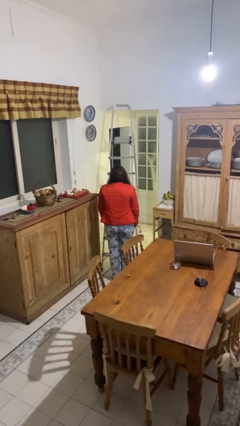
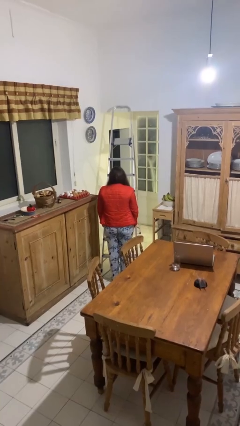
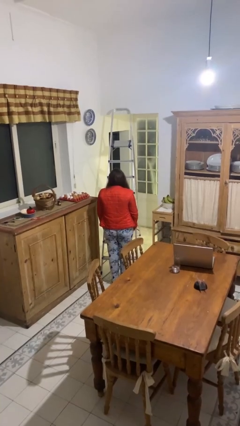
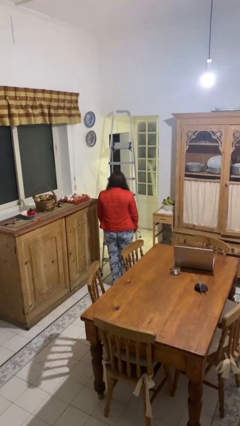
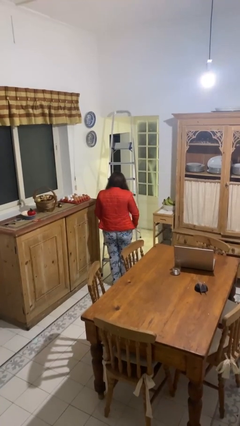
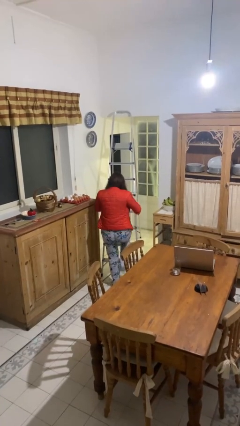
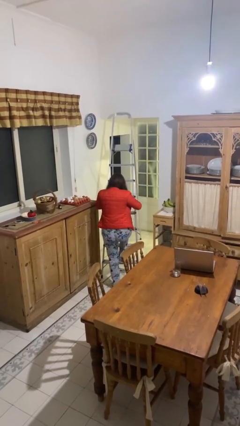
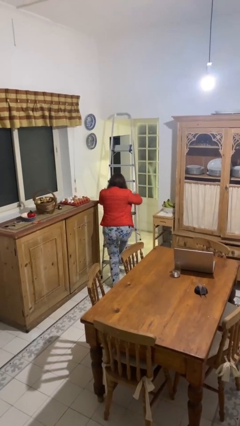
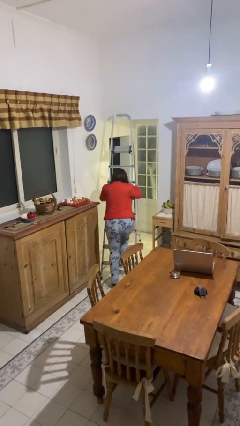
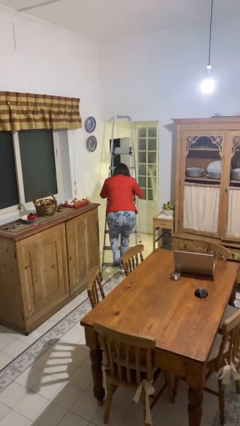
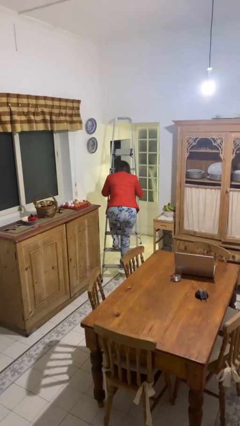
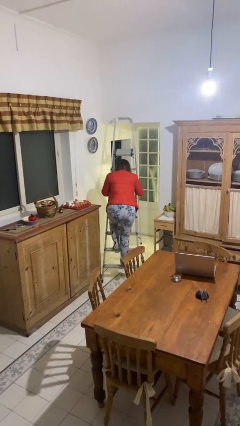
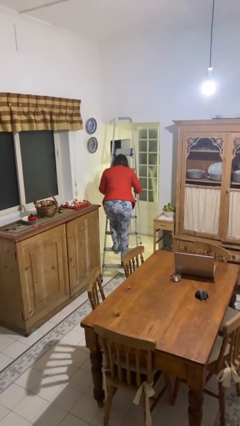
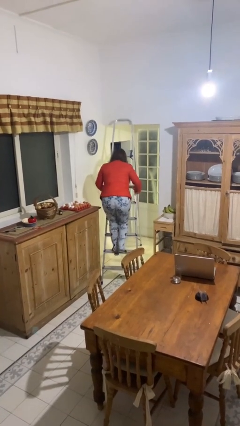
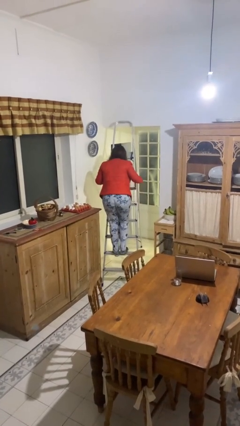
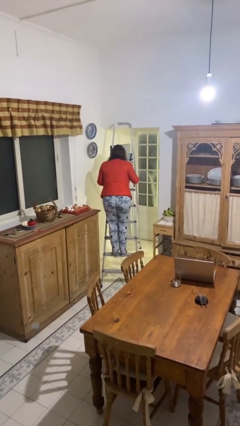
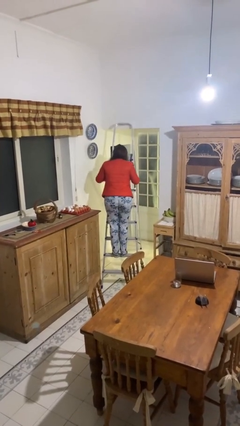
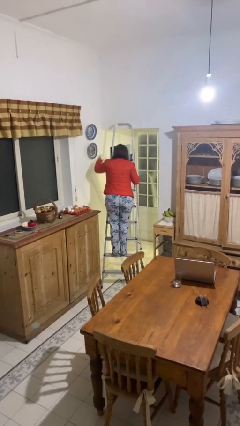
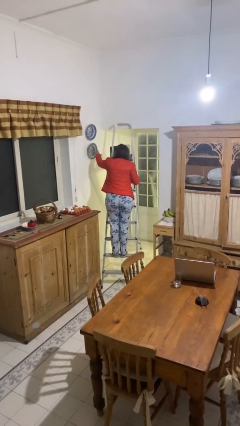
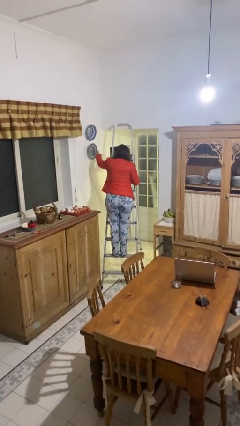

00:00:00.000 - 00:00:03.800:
person climbs up ladder

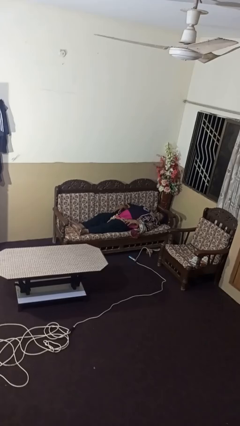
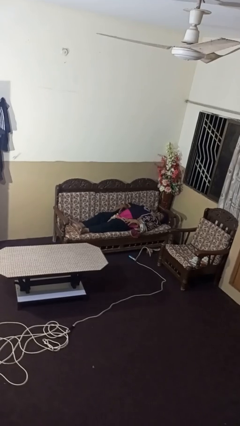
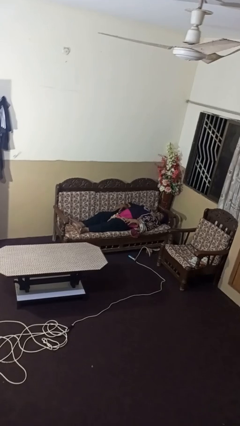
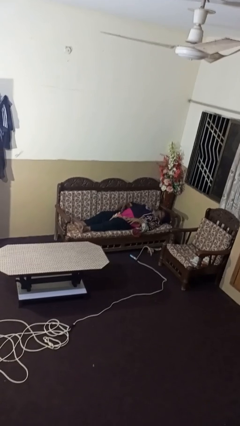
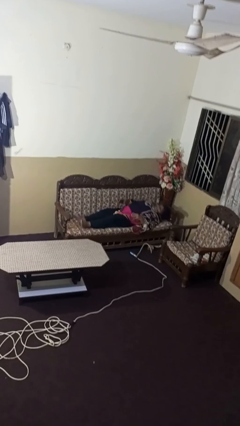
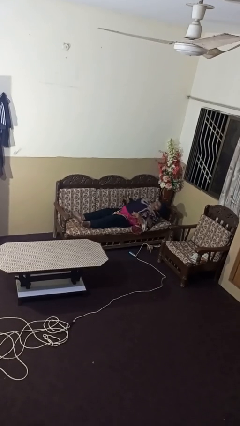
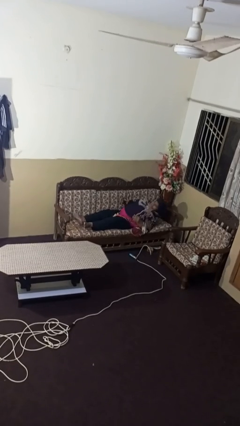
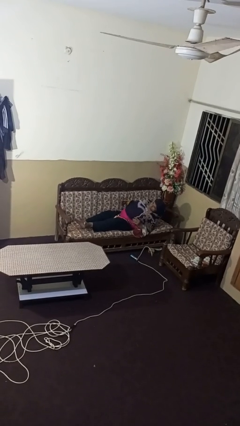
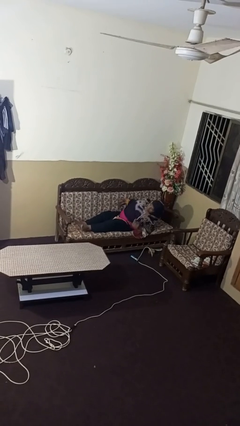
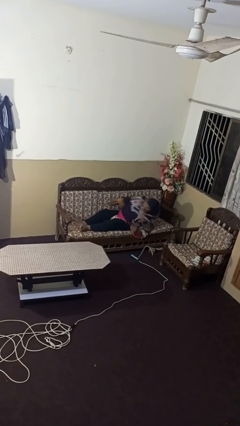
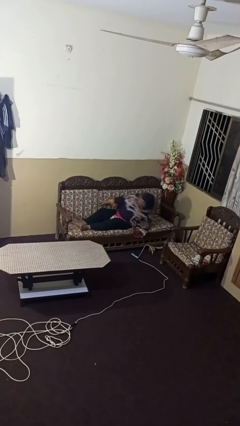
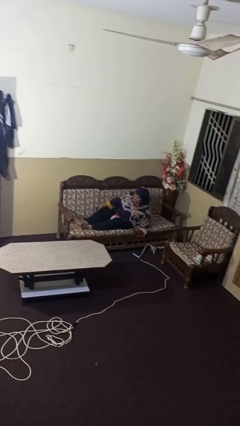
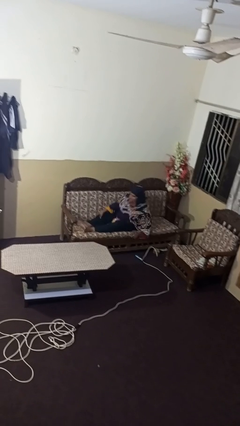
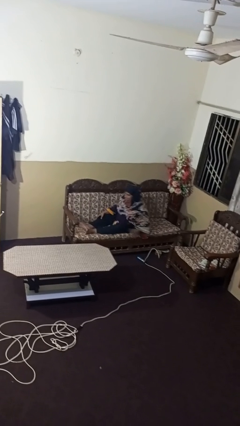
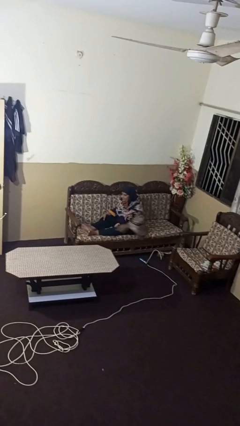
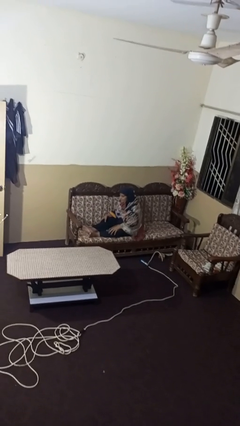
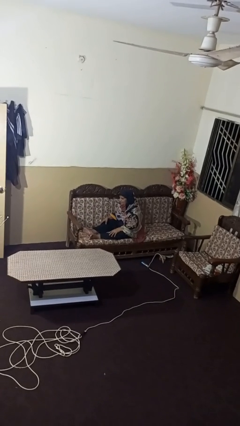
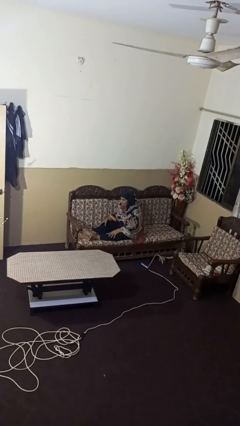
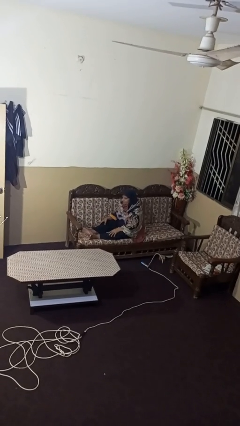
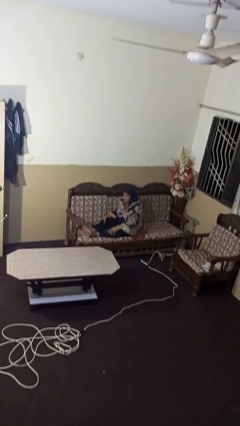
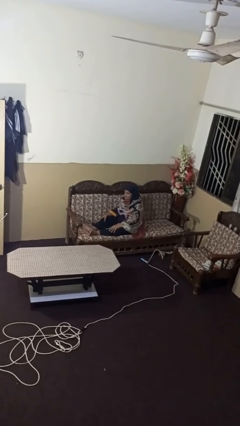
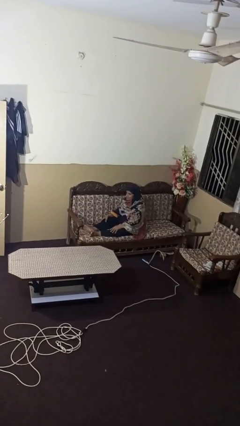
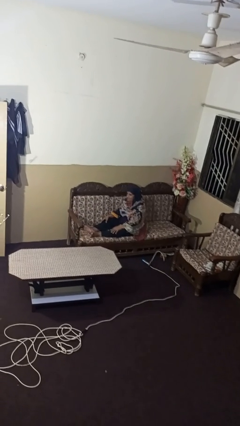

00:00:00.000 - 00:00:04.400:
person stands up

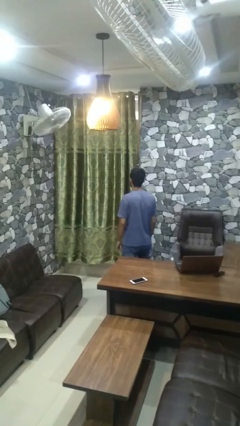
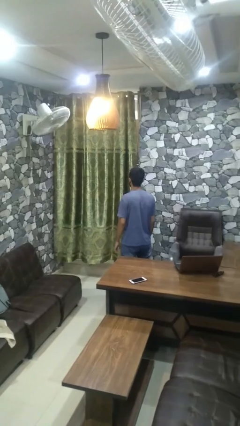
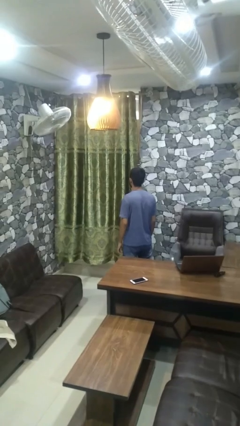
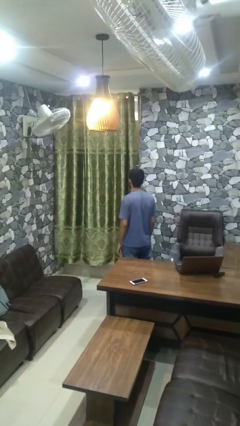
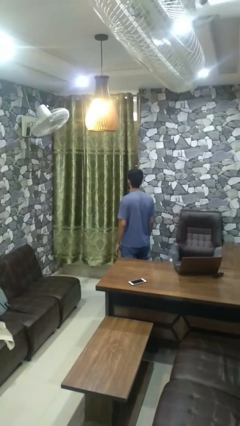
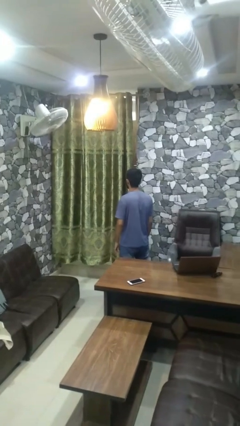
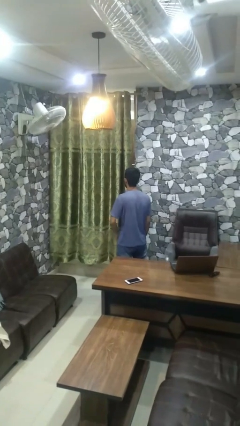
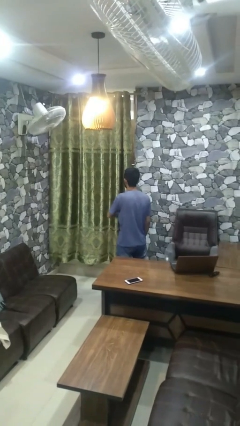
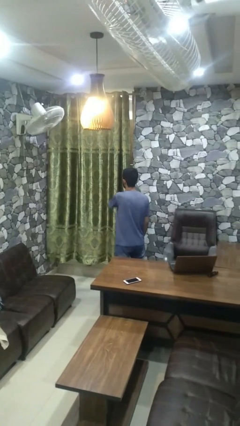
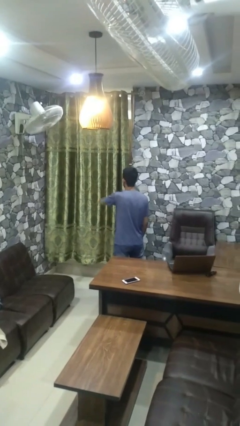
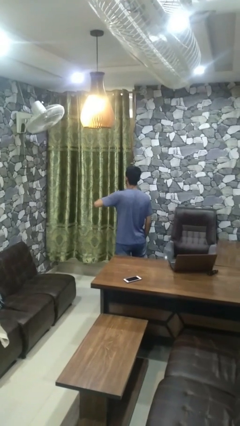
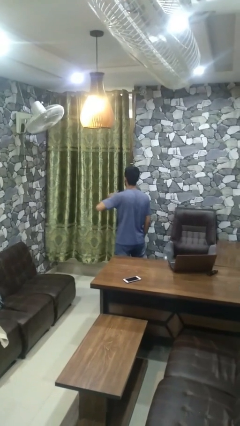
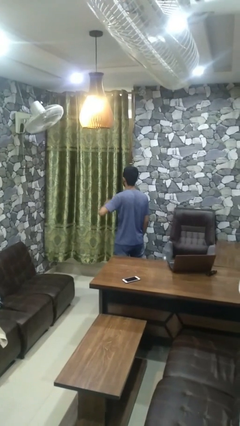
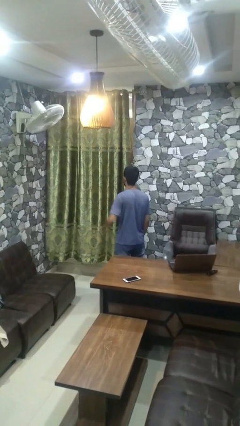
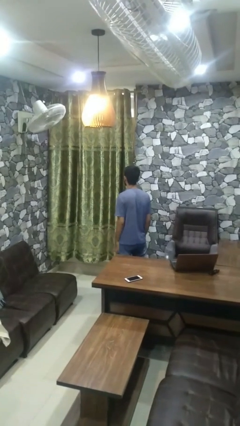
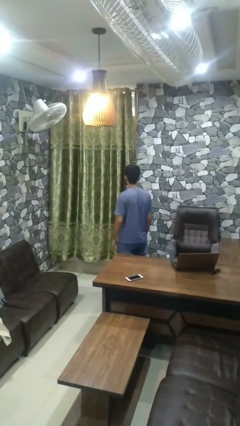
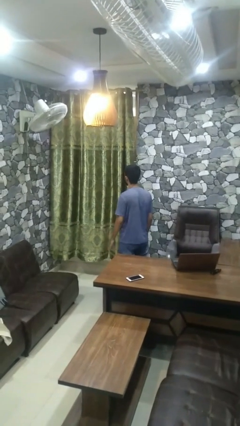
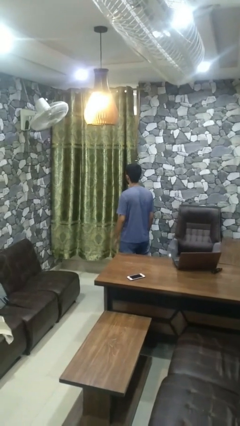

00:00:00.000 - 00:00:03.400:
person gestures cut

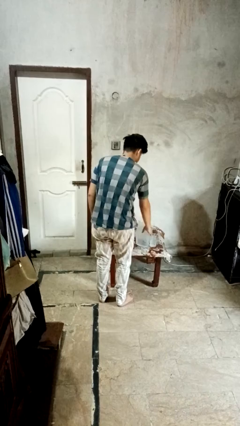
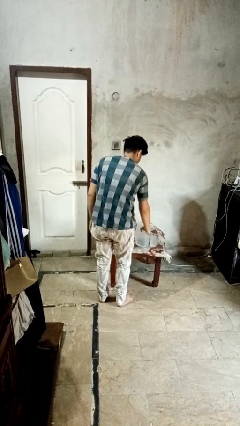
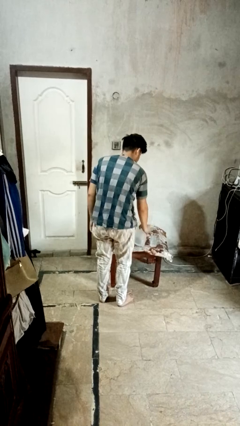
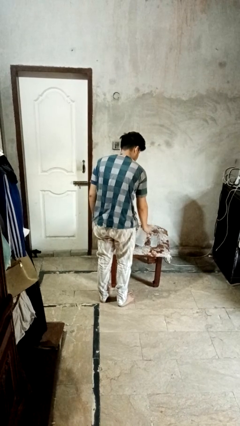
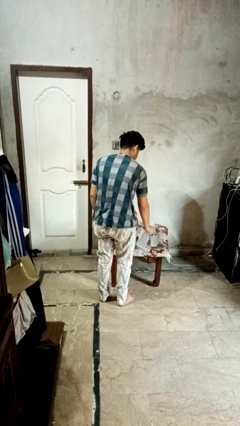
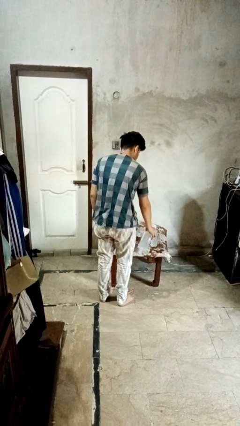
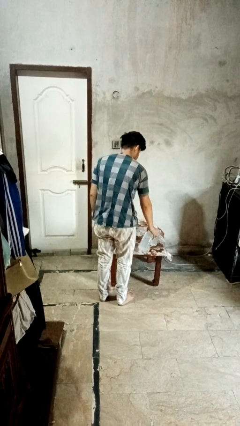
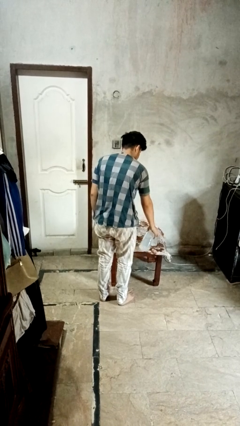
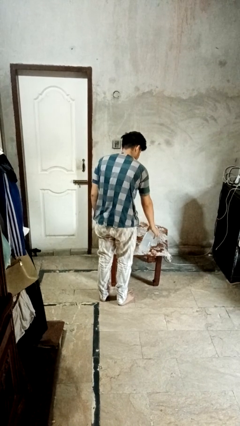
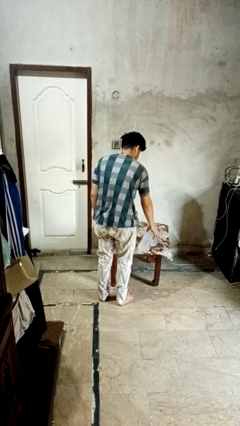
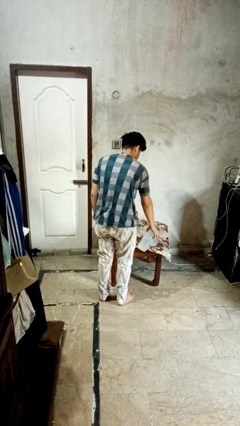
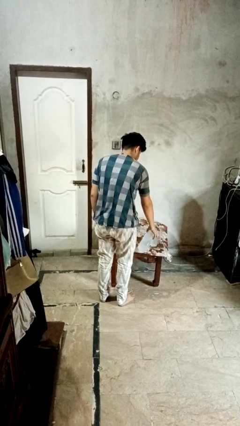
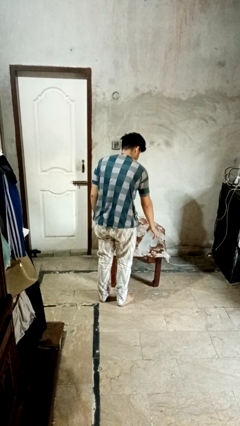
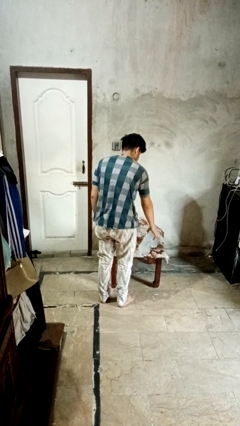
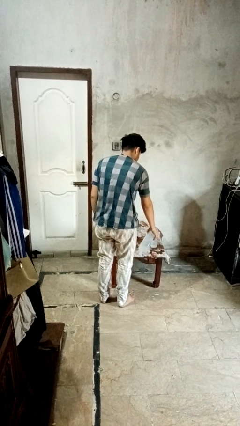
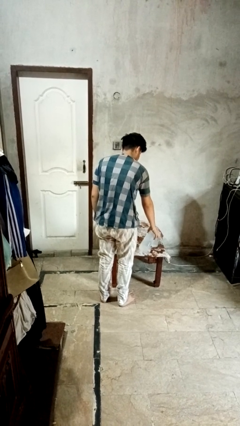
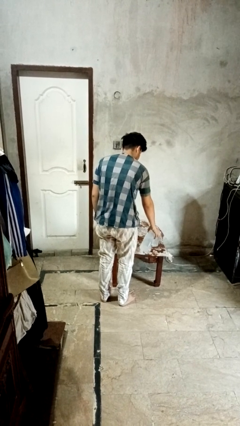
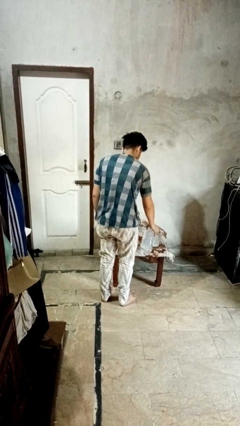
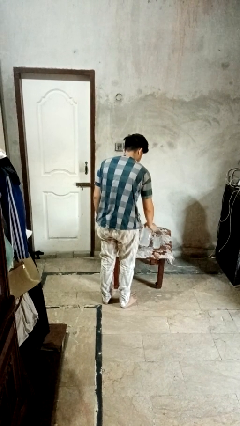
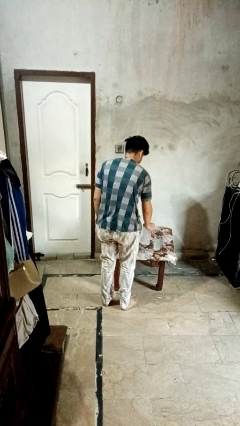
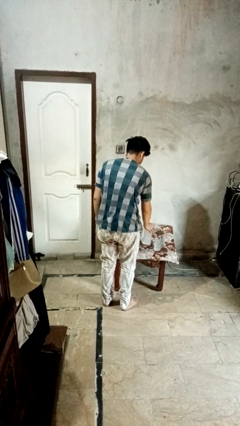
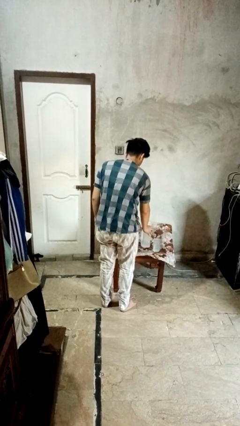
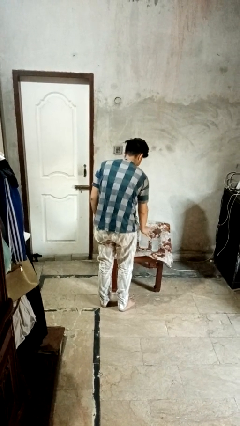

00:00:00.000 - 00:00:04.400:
person pours liquid into cup

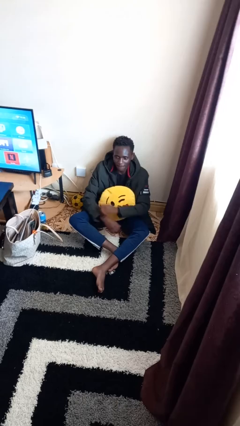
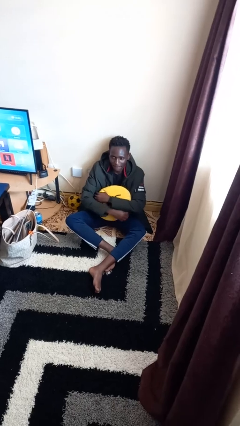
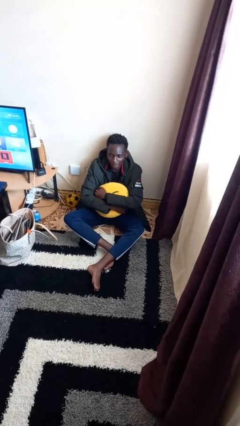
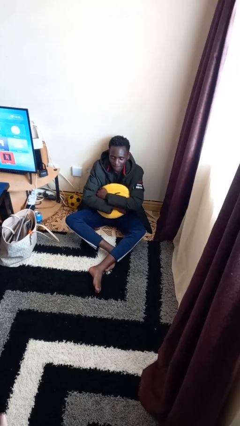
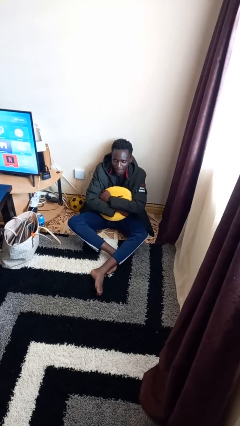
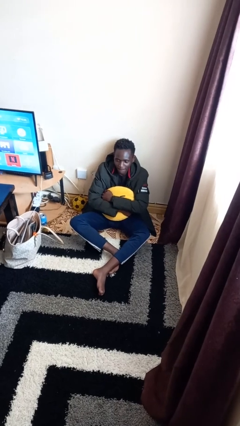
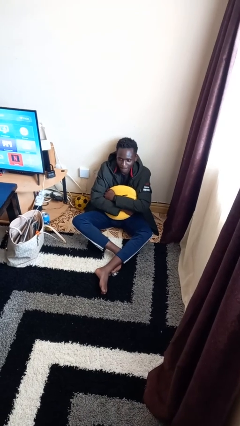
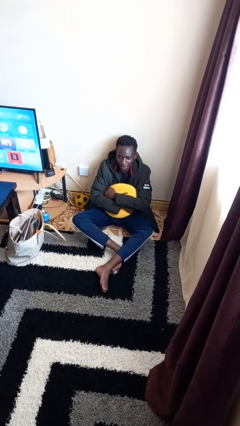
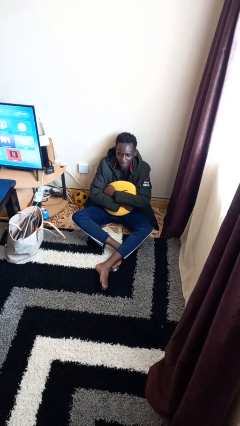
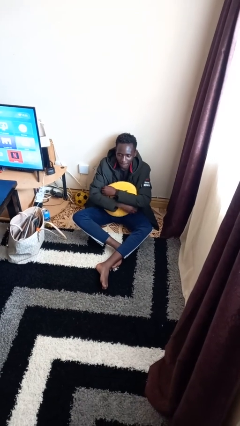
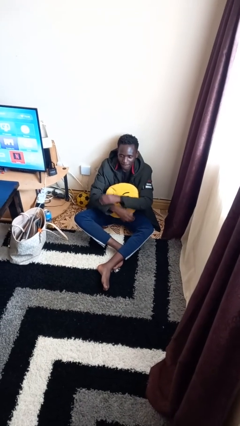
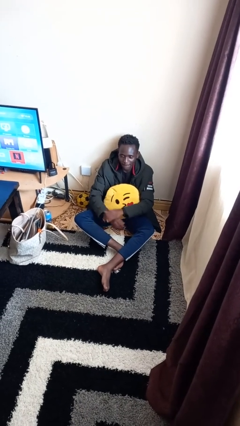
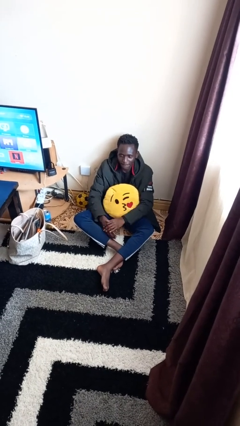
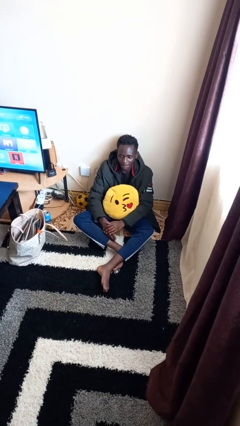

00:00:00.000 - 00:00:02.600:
person hugs stuffed animal
